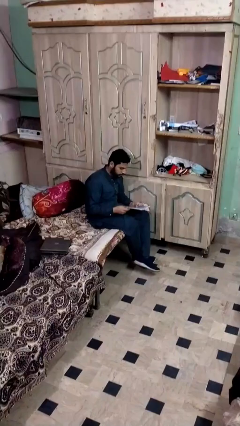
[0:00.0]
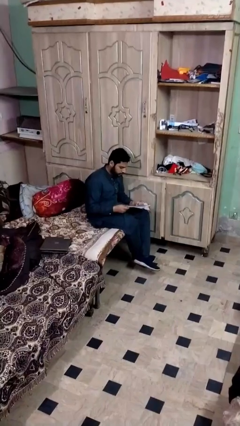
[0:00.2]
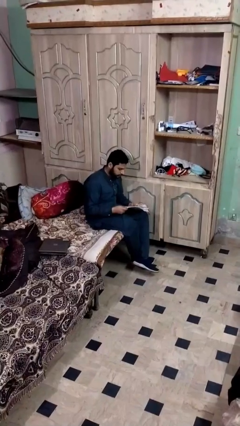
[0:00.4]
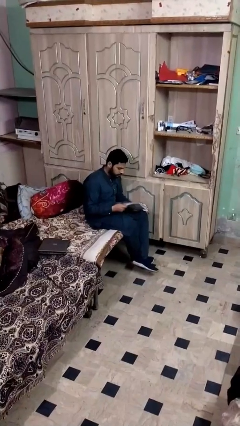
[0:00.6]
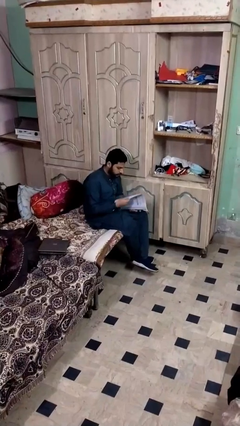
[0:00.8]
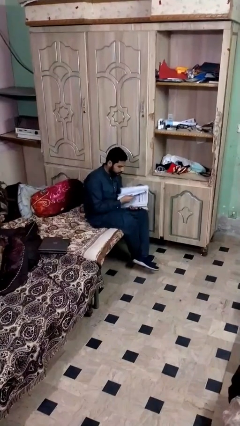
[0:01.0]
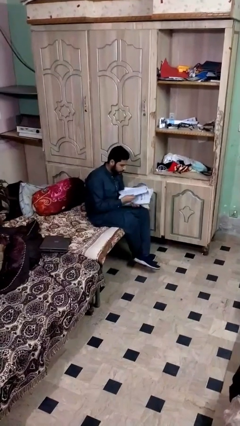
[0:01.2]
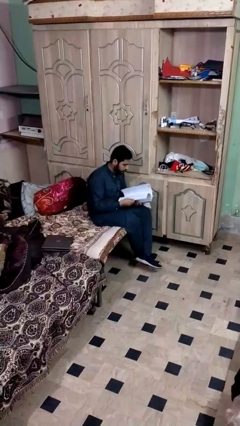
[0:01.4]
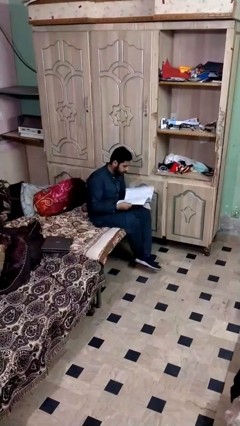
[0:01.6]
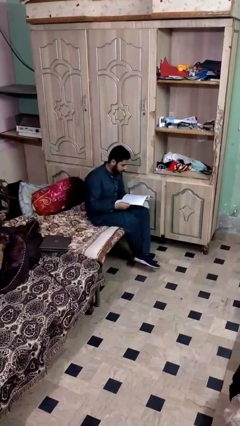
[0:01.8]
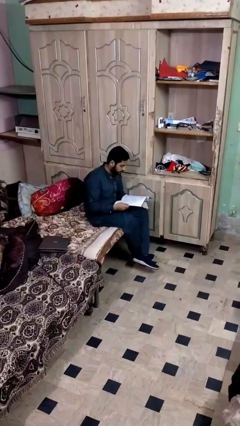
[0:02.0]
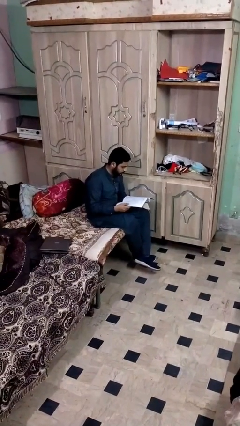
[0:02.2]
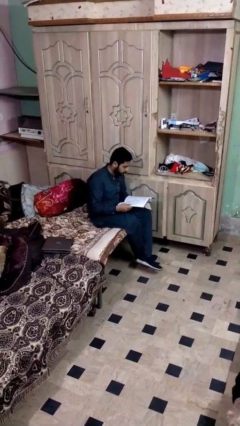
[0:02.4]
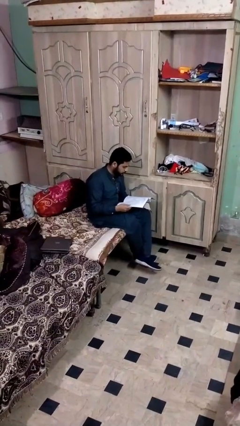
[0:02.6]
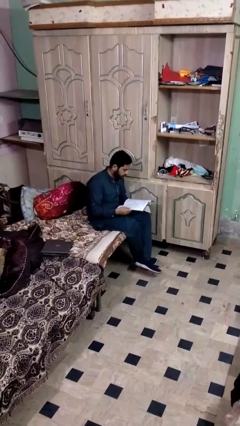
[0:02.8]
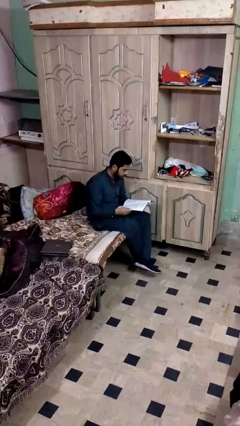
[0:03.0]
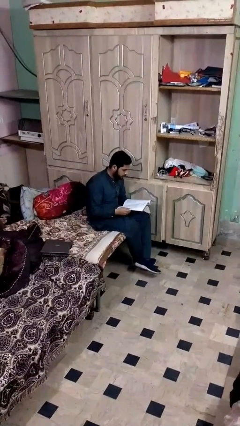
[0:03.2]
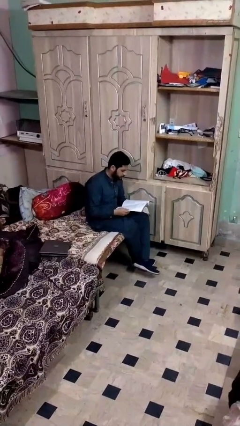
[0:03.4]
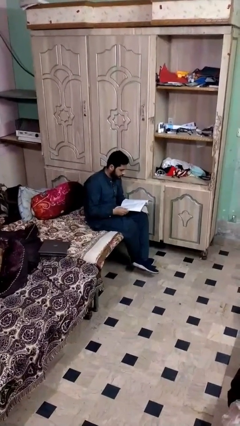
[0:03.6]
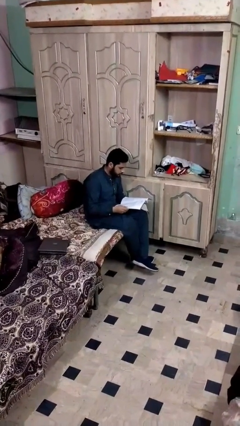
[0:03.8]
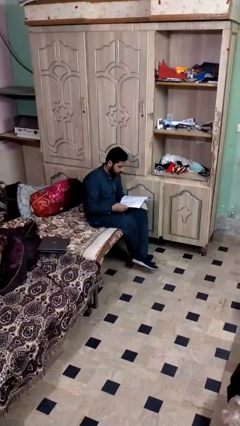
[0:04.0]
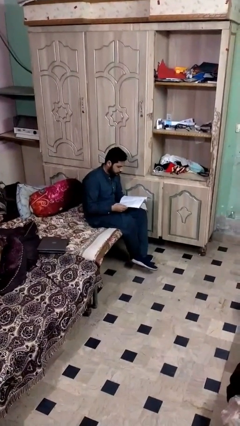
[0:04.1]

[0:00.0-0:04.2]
person reads document

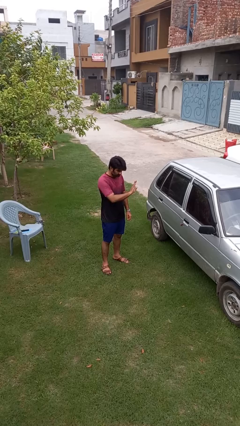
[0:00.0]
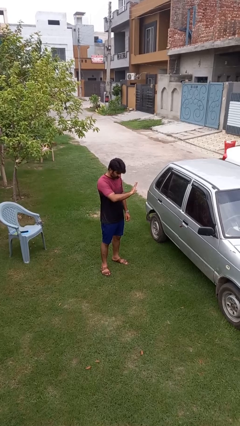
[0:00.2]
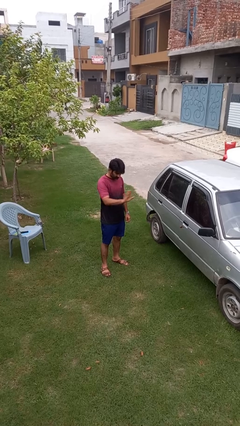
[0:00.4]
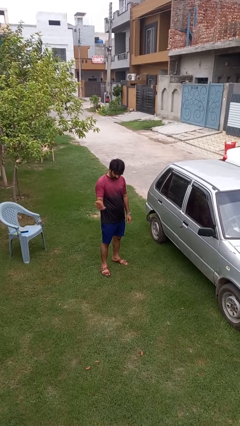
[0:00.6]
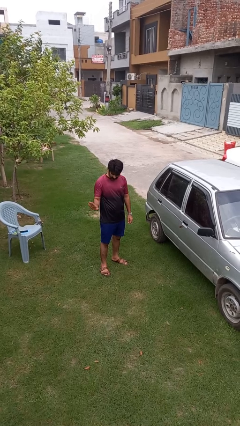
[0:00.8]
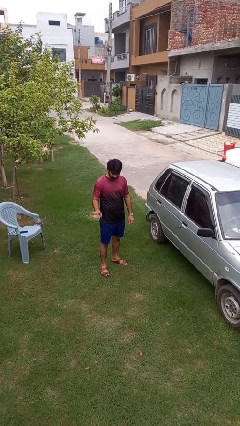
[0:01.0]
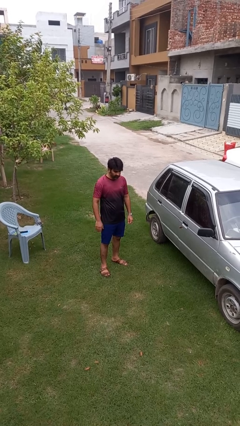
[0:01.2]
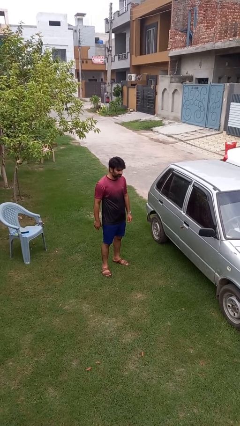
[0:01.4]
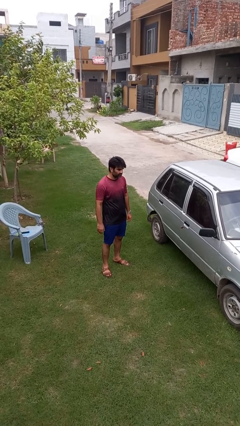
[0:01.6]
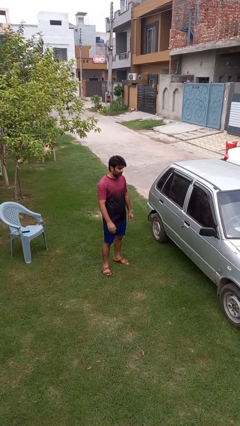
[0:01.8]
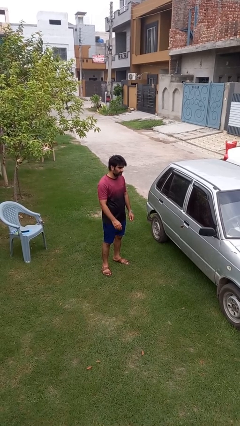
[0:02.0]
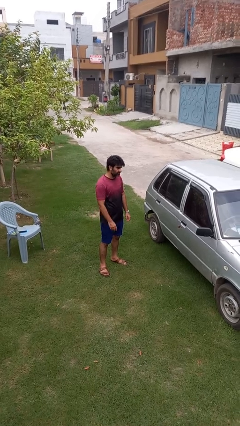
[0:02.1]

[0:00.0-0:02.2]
person gestures swipe right

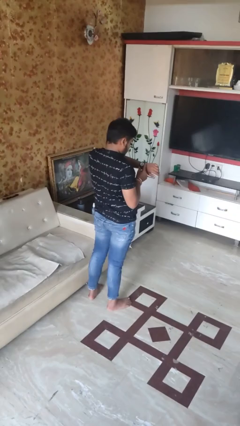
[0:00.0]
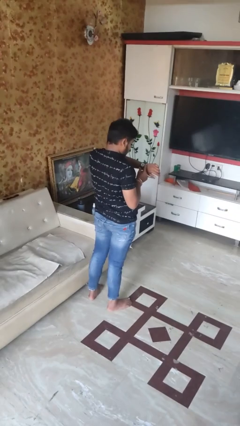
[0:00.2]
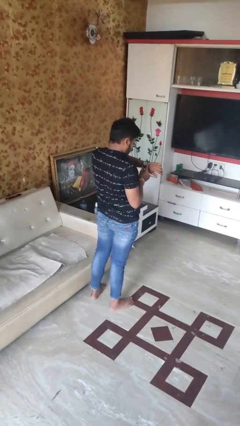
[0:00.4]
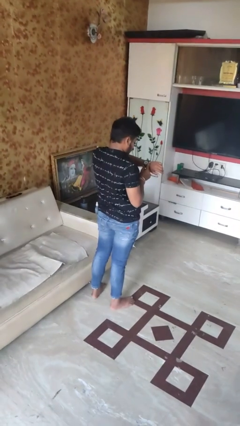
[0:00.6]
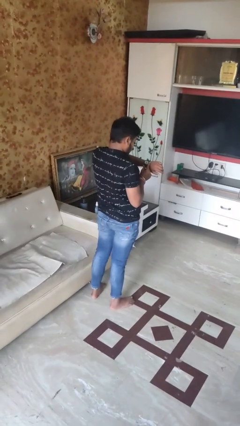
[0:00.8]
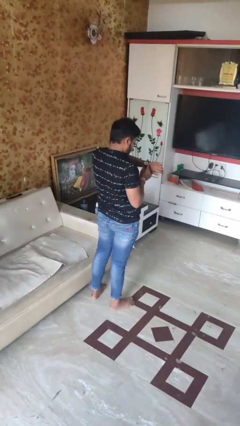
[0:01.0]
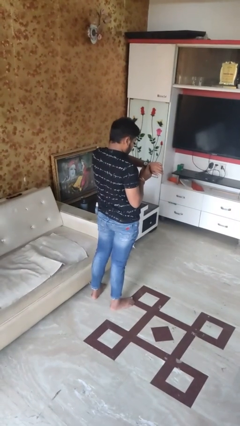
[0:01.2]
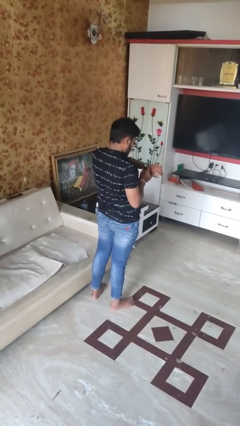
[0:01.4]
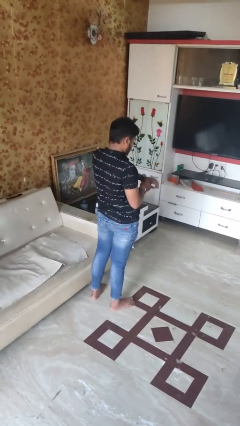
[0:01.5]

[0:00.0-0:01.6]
person looks at wristwatch

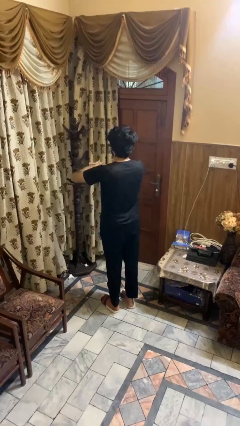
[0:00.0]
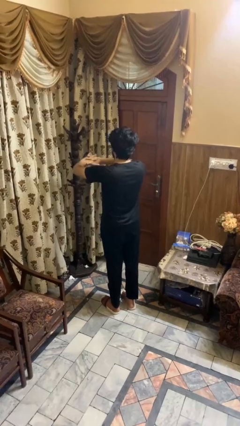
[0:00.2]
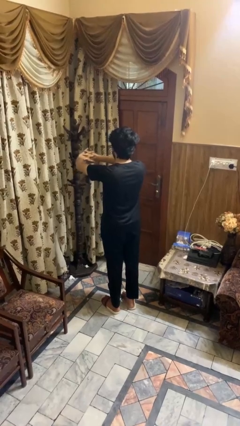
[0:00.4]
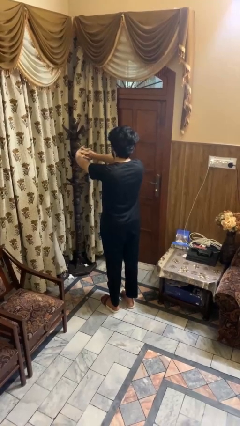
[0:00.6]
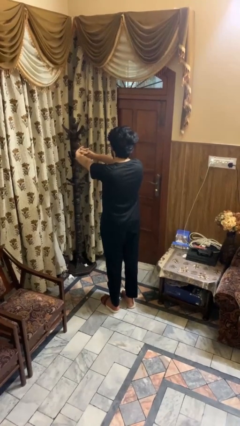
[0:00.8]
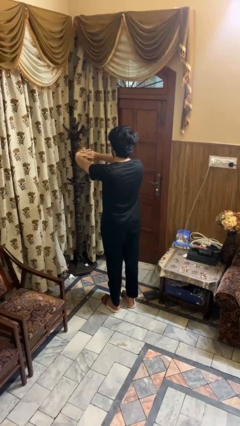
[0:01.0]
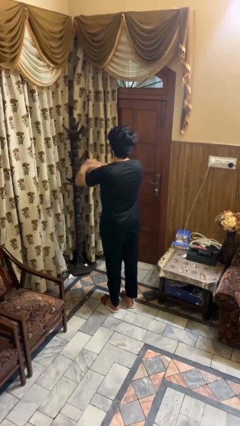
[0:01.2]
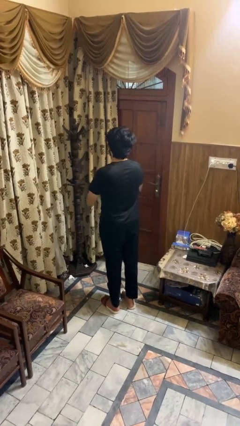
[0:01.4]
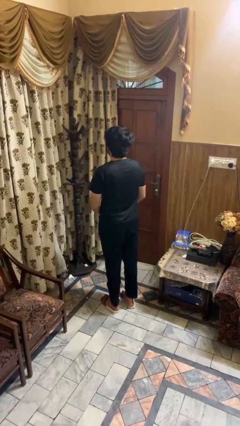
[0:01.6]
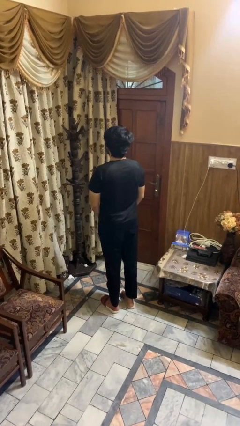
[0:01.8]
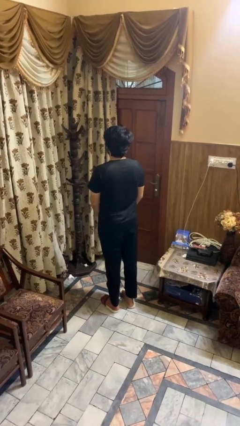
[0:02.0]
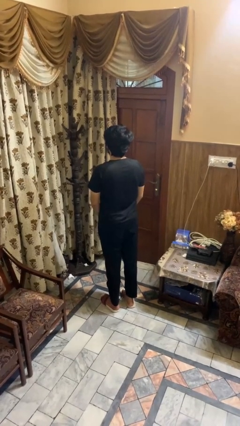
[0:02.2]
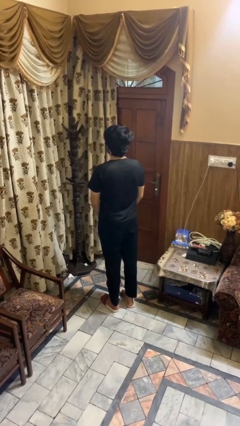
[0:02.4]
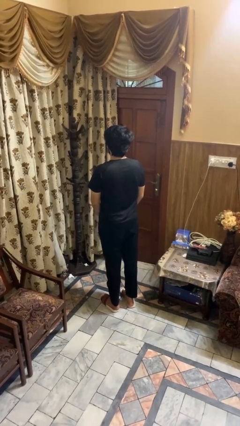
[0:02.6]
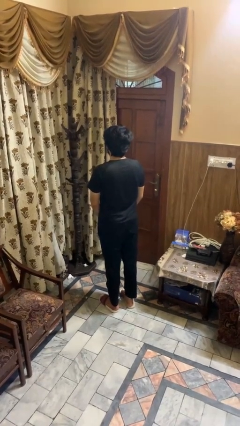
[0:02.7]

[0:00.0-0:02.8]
person cracks knuckles

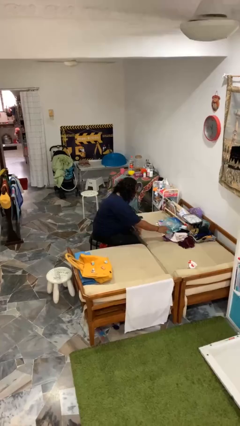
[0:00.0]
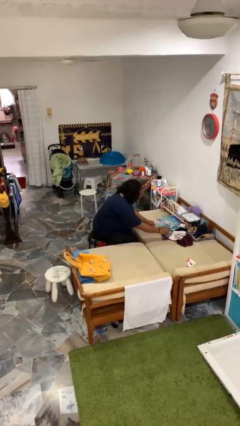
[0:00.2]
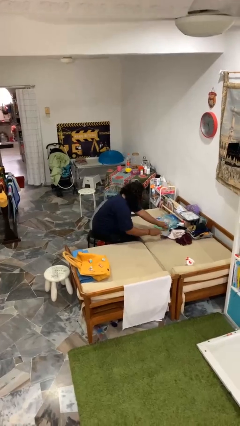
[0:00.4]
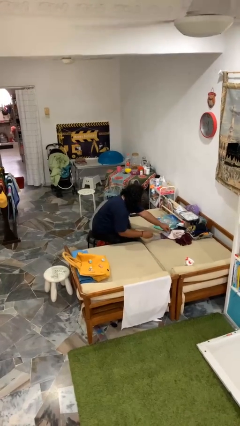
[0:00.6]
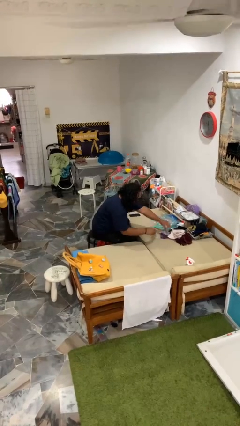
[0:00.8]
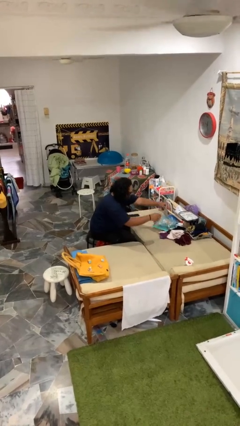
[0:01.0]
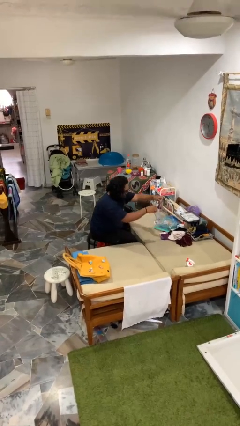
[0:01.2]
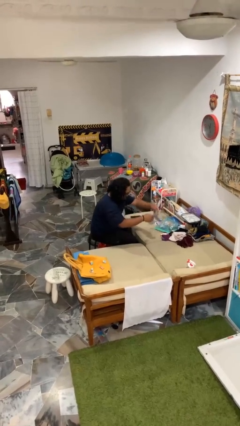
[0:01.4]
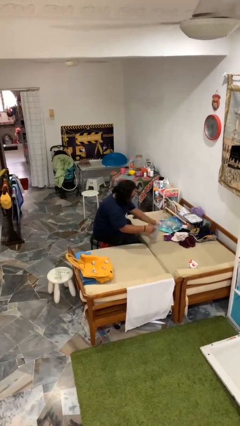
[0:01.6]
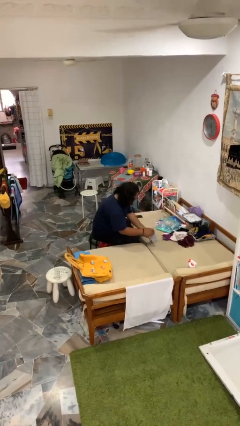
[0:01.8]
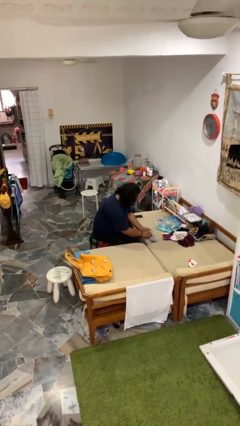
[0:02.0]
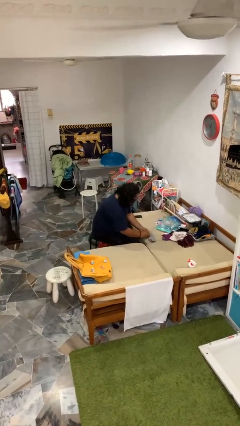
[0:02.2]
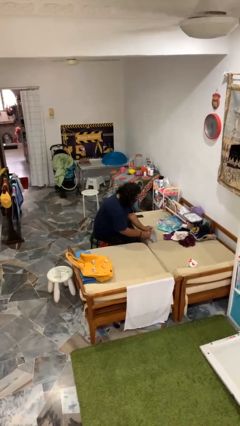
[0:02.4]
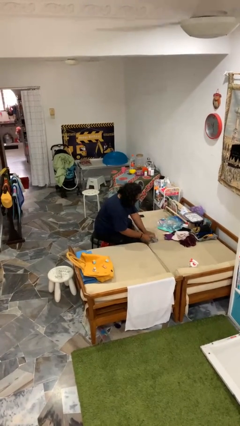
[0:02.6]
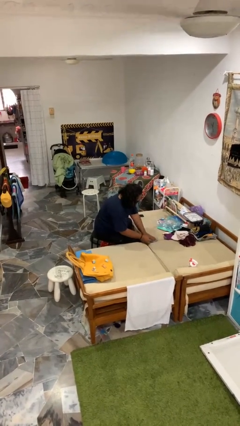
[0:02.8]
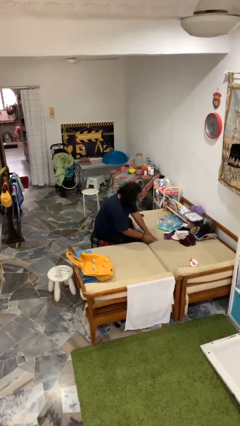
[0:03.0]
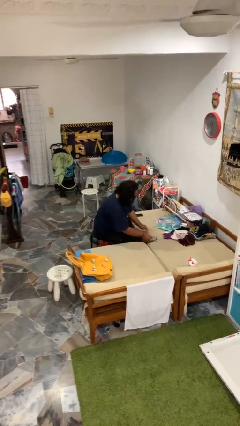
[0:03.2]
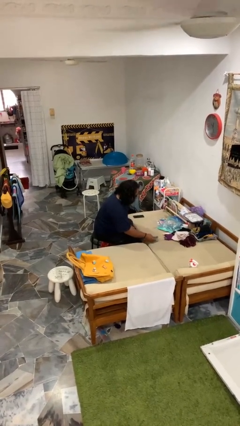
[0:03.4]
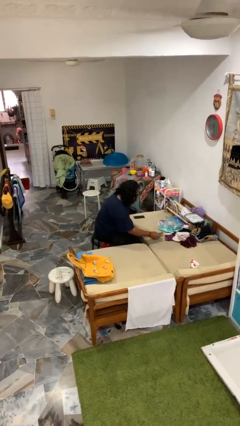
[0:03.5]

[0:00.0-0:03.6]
person folds socks

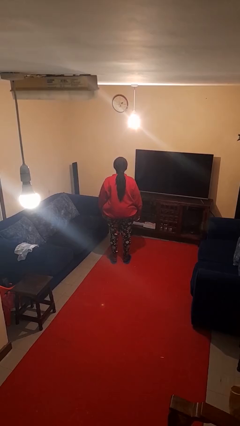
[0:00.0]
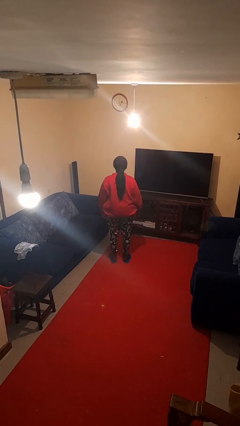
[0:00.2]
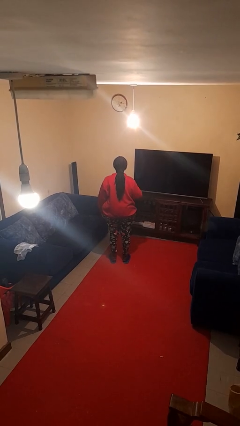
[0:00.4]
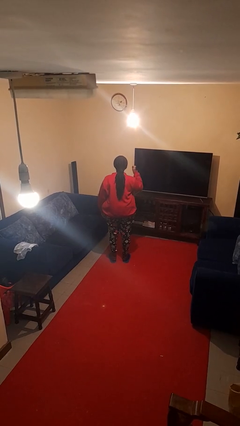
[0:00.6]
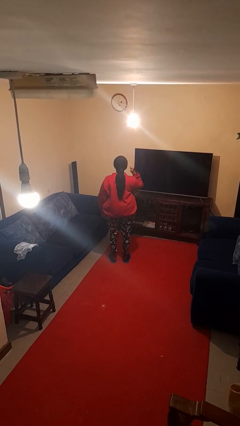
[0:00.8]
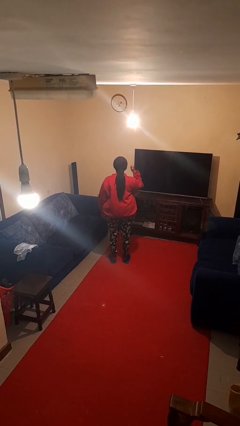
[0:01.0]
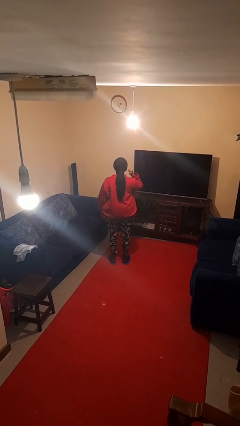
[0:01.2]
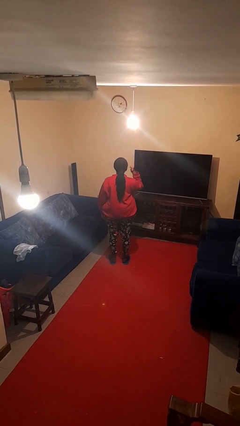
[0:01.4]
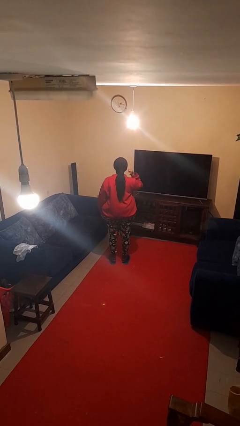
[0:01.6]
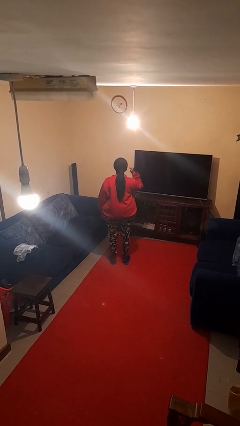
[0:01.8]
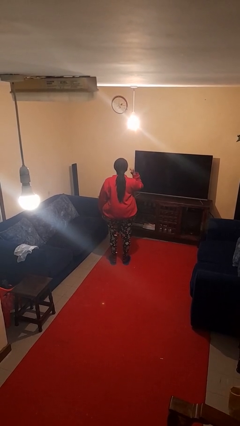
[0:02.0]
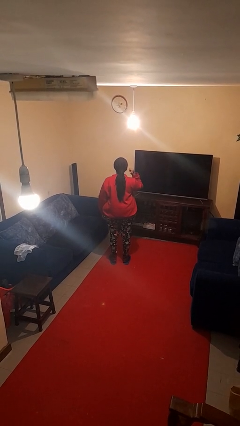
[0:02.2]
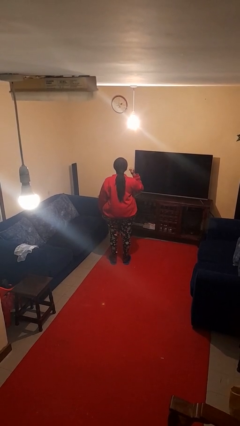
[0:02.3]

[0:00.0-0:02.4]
person gestures behind me

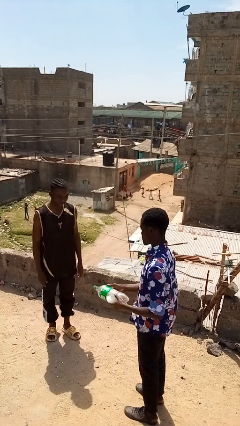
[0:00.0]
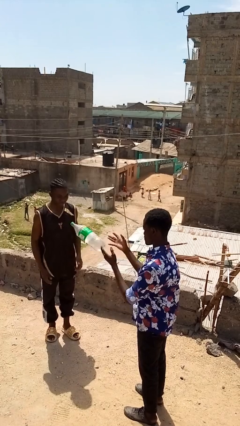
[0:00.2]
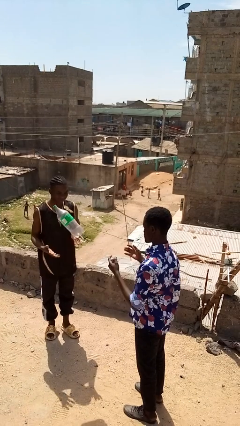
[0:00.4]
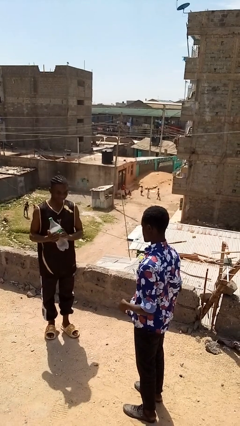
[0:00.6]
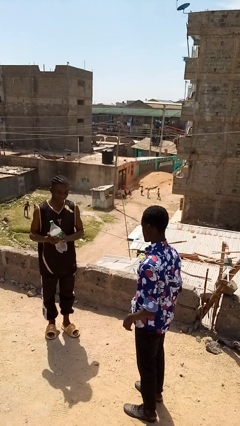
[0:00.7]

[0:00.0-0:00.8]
person throws object to person
